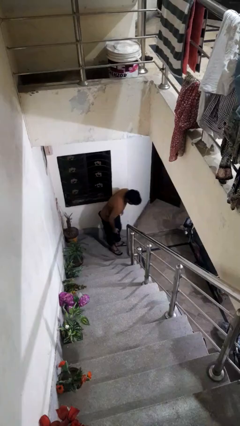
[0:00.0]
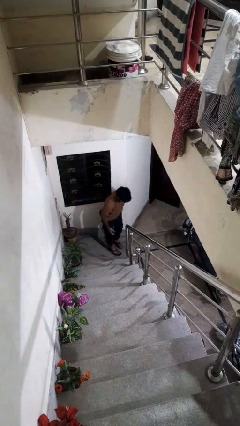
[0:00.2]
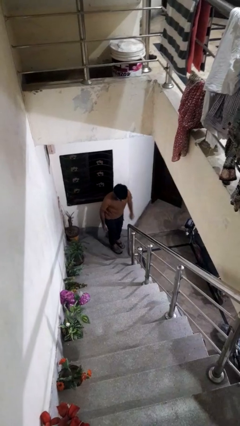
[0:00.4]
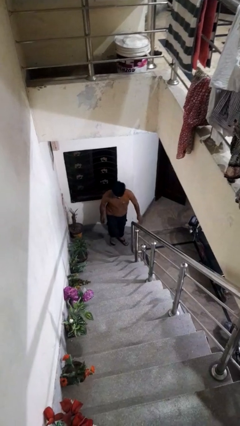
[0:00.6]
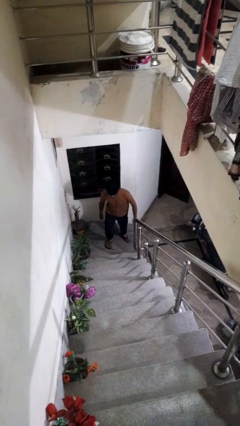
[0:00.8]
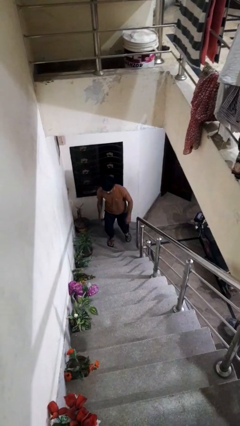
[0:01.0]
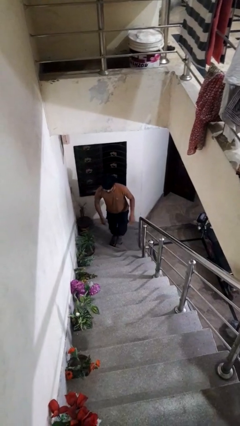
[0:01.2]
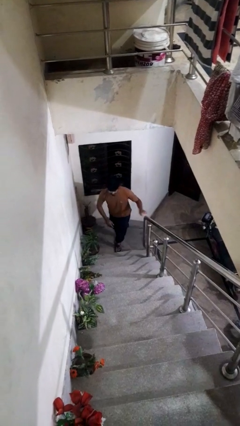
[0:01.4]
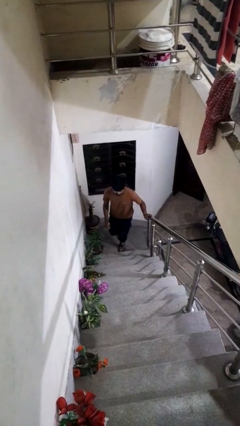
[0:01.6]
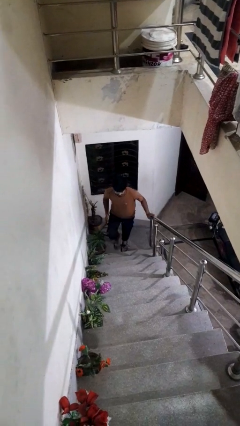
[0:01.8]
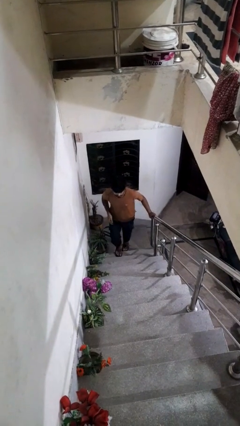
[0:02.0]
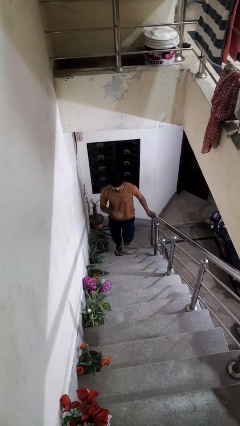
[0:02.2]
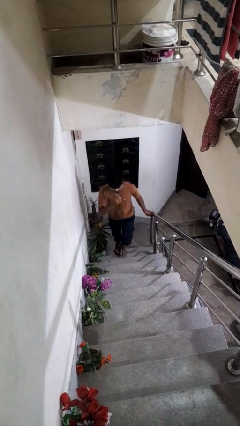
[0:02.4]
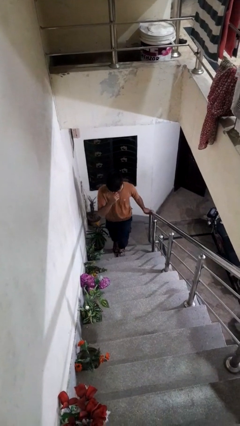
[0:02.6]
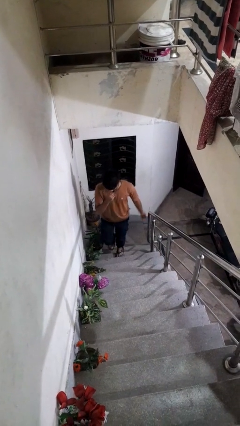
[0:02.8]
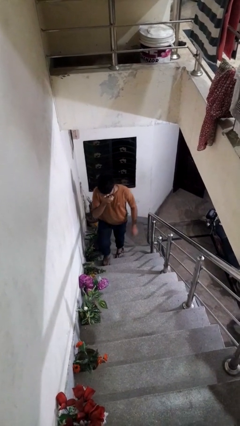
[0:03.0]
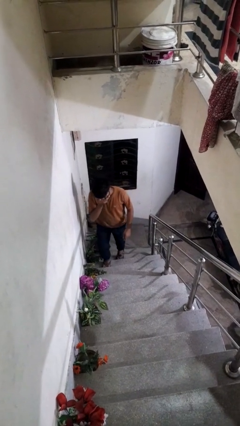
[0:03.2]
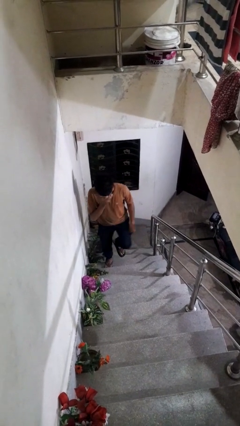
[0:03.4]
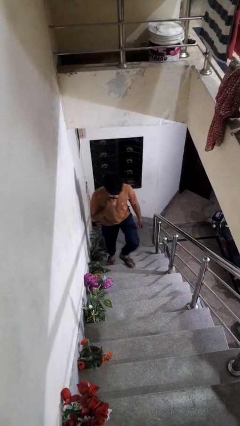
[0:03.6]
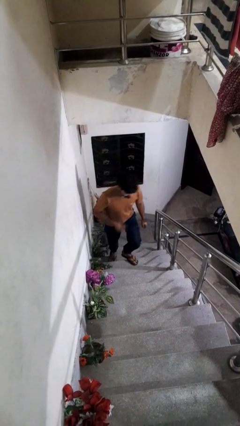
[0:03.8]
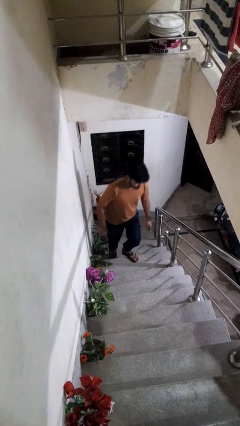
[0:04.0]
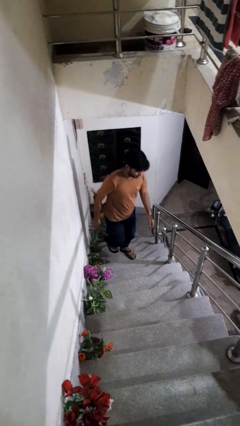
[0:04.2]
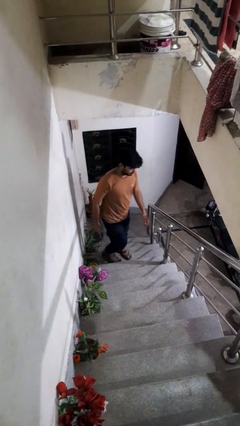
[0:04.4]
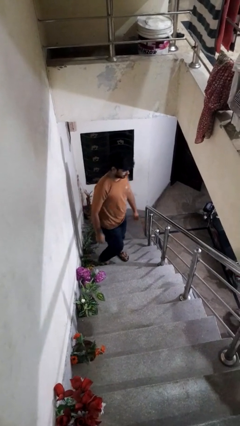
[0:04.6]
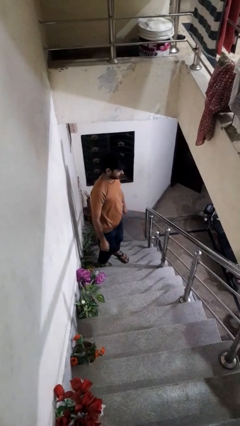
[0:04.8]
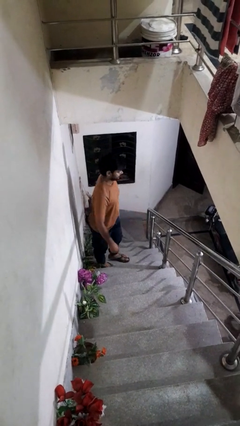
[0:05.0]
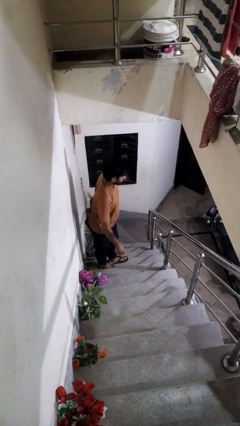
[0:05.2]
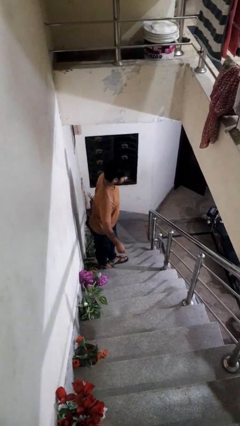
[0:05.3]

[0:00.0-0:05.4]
person climbs up stairs

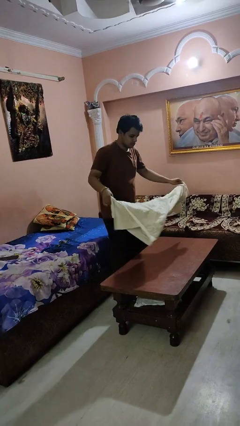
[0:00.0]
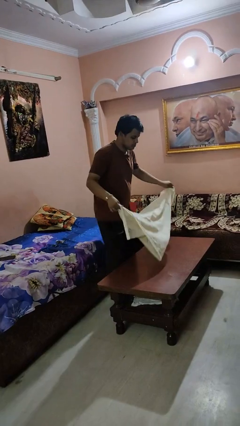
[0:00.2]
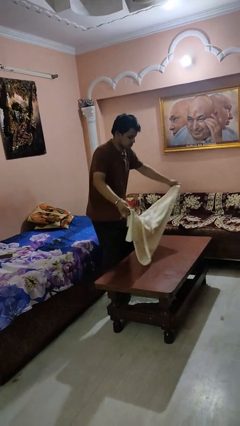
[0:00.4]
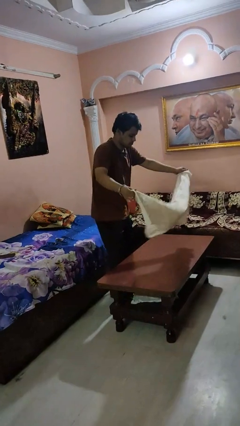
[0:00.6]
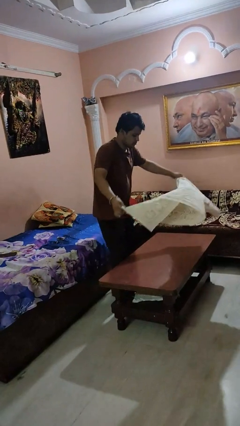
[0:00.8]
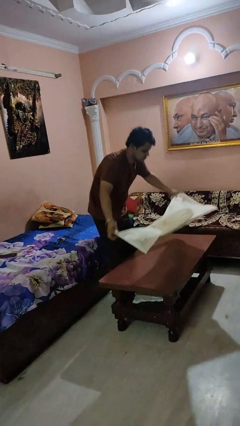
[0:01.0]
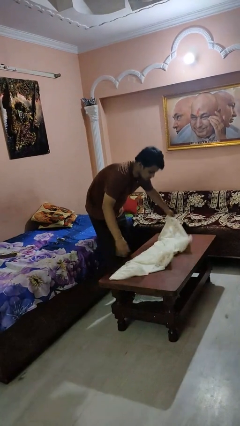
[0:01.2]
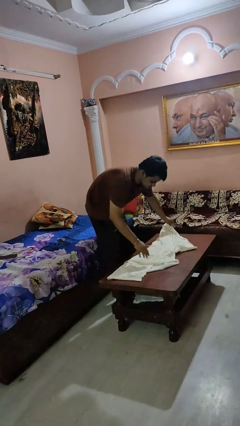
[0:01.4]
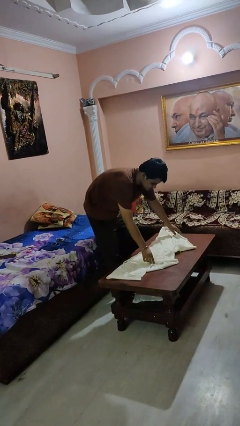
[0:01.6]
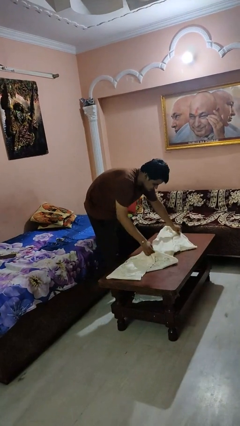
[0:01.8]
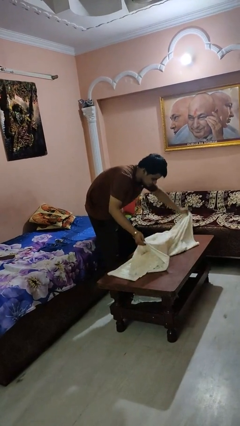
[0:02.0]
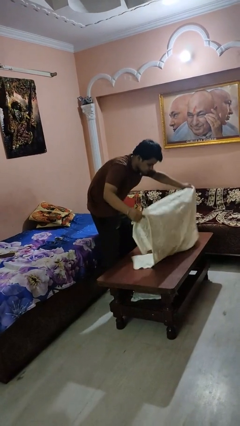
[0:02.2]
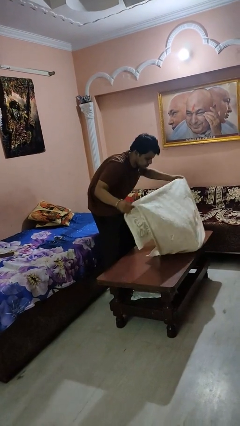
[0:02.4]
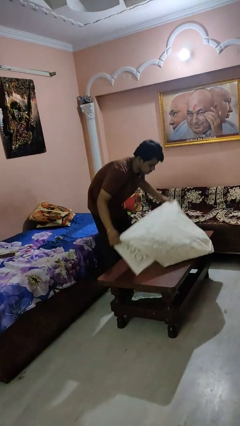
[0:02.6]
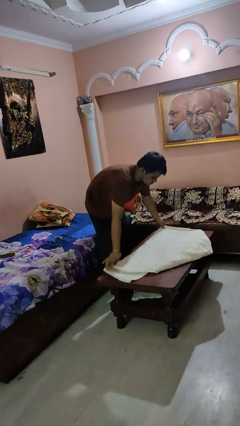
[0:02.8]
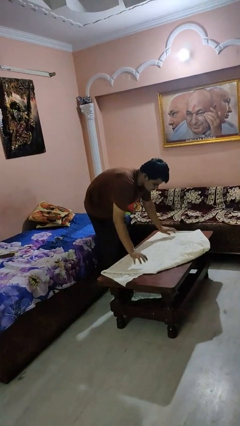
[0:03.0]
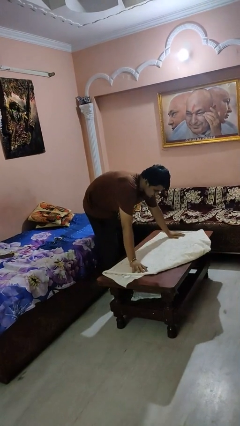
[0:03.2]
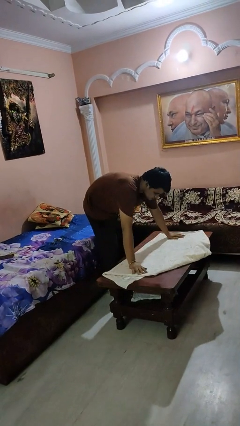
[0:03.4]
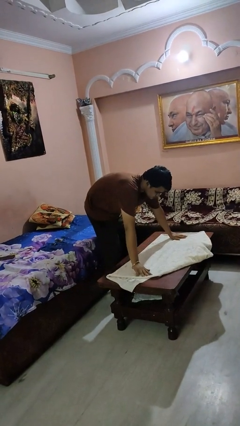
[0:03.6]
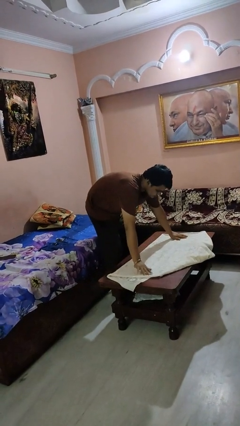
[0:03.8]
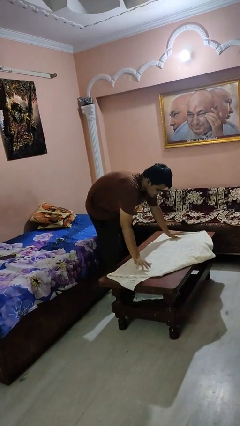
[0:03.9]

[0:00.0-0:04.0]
person spreads tablecloth

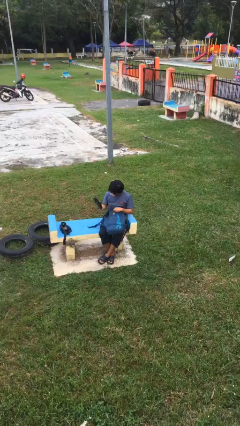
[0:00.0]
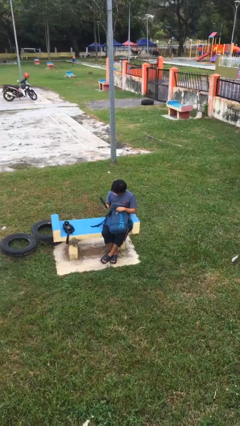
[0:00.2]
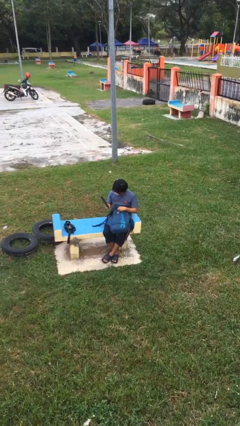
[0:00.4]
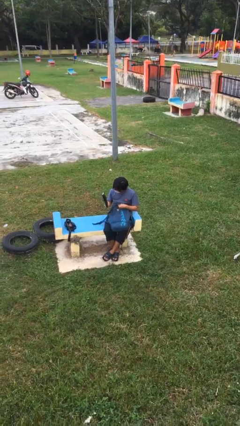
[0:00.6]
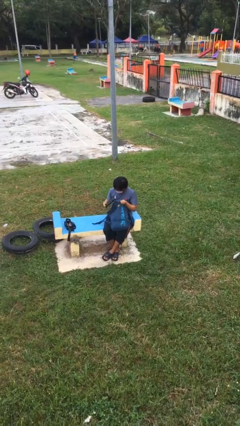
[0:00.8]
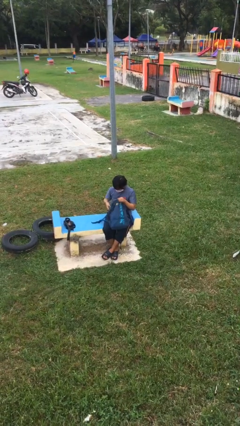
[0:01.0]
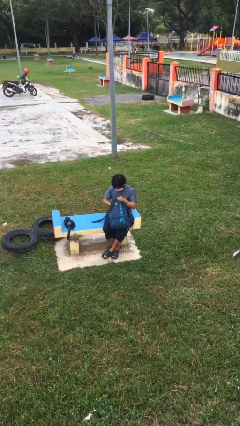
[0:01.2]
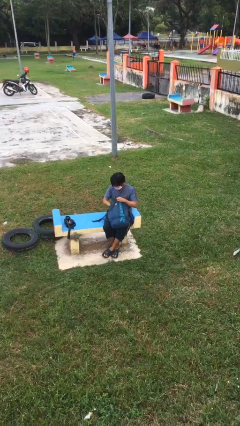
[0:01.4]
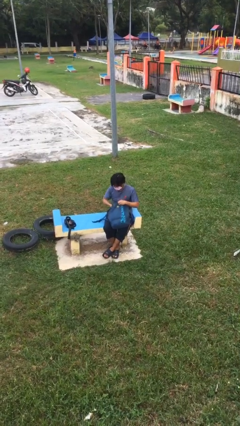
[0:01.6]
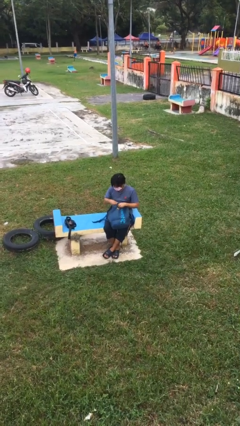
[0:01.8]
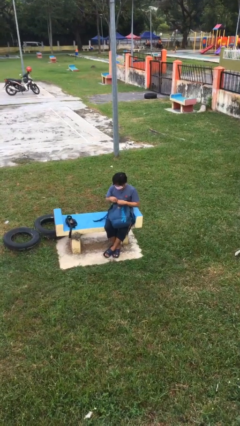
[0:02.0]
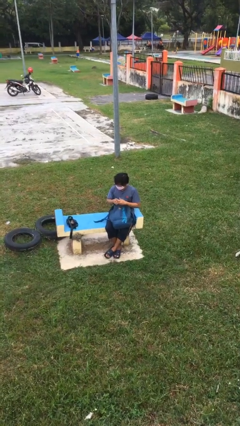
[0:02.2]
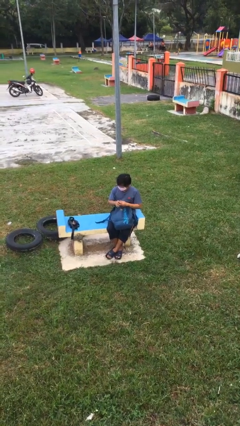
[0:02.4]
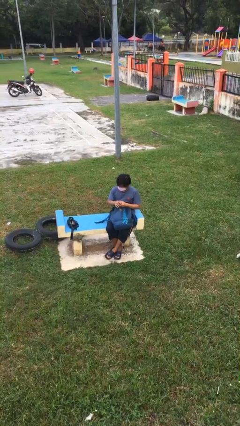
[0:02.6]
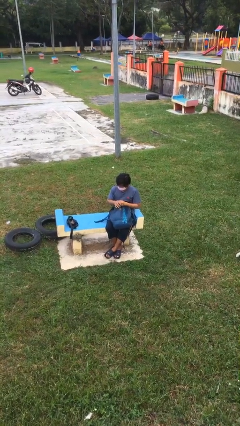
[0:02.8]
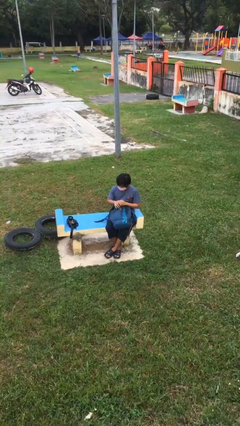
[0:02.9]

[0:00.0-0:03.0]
person puts object into backpack

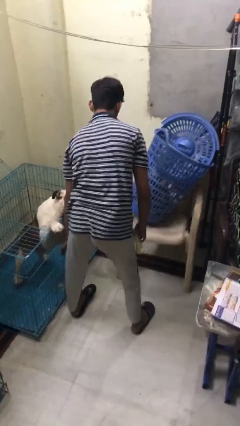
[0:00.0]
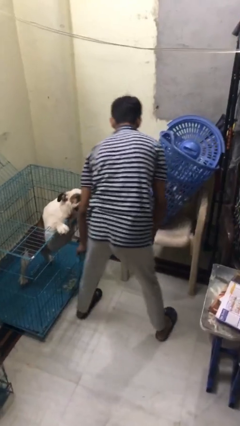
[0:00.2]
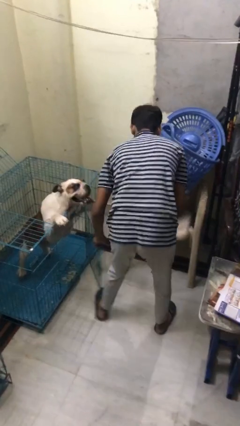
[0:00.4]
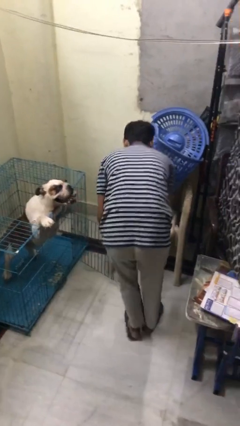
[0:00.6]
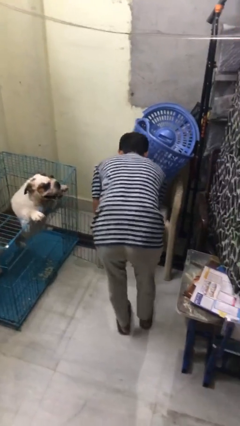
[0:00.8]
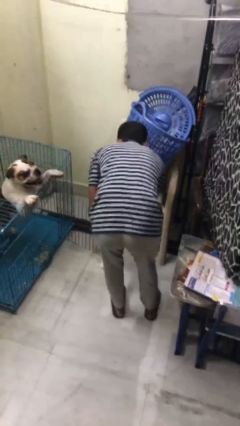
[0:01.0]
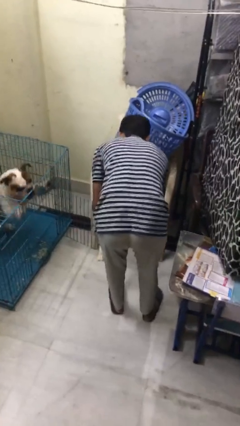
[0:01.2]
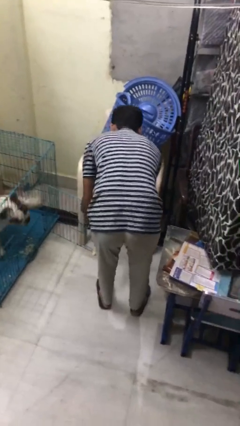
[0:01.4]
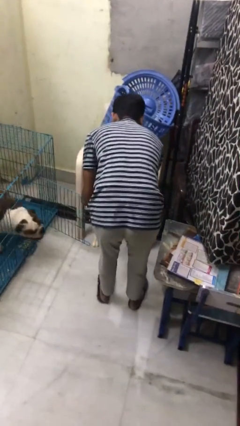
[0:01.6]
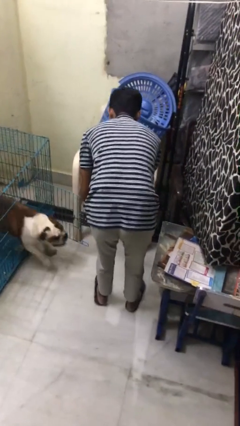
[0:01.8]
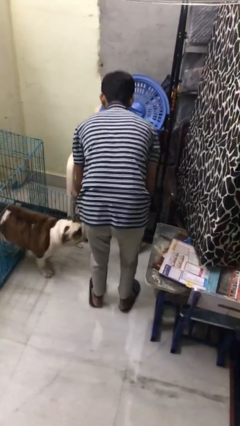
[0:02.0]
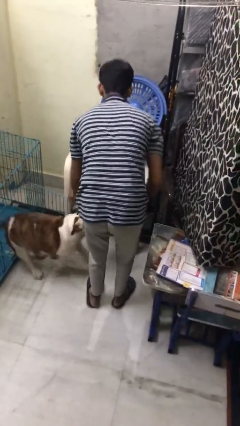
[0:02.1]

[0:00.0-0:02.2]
person uncrates dog

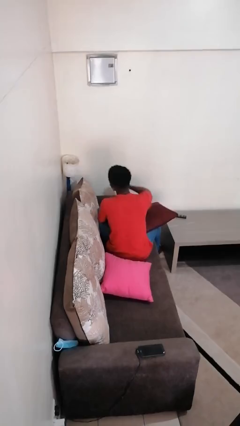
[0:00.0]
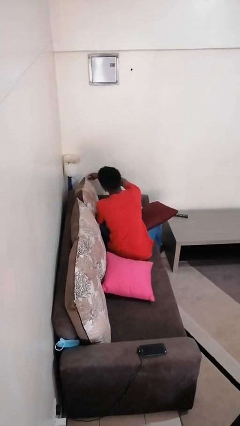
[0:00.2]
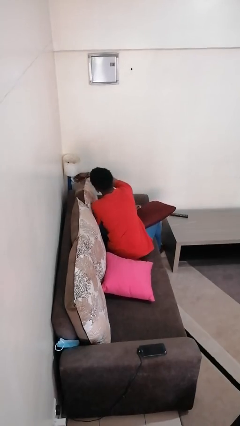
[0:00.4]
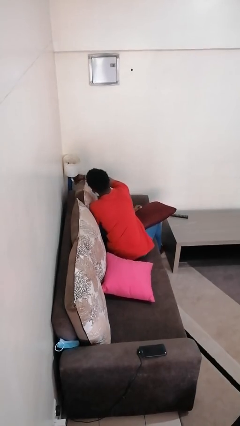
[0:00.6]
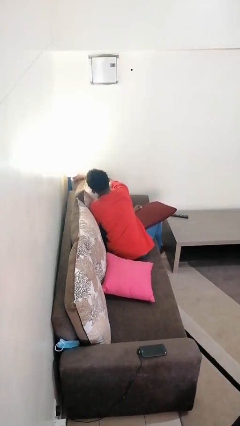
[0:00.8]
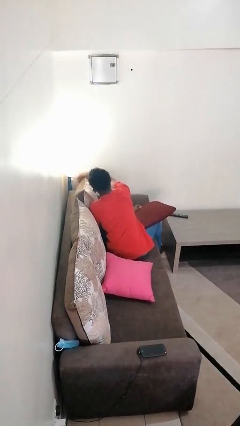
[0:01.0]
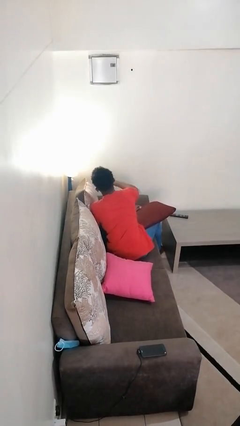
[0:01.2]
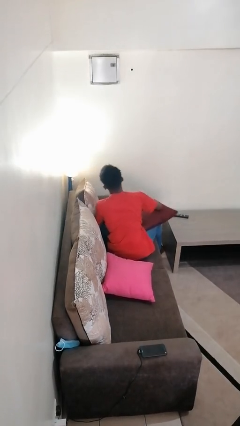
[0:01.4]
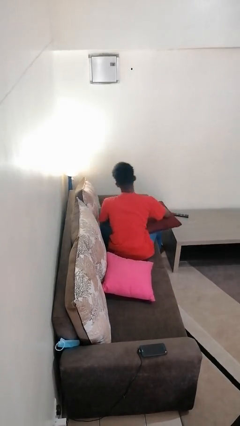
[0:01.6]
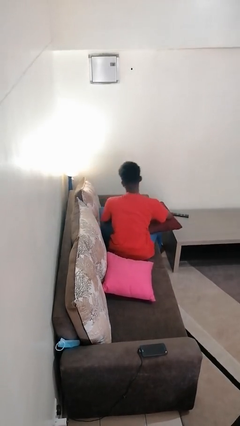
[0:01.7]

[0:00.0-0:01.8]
person turns on lamp

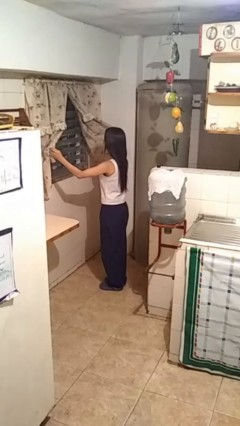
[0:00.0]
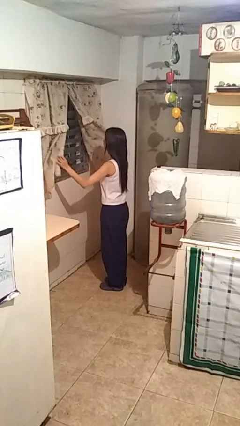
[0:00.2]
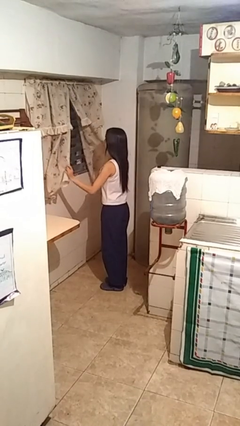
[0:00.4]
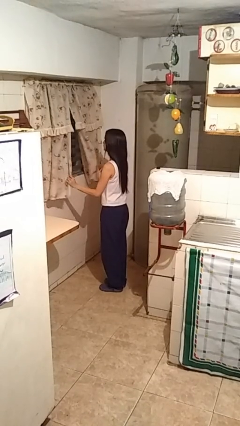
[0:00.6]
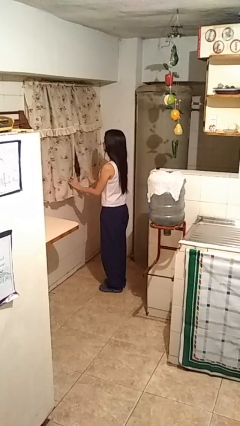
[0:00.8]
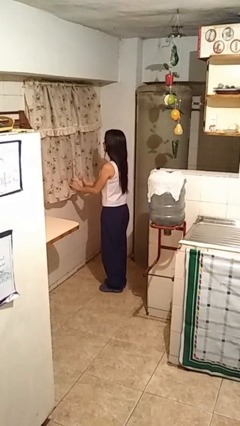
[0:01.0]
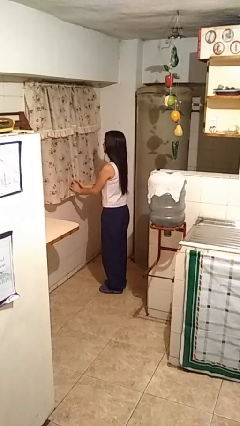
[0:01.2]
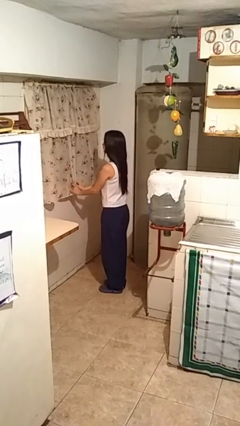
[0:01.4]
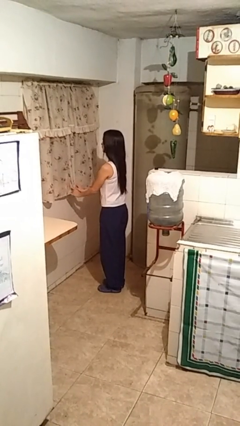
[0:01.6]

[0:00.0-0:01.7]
person closes curtains
